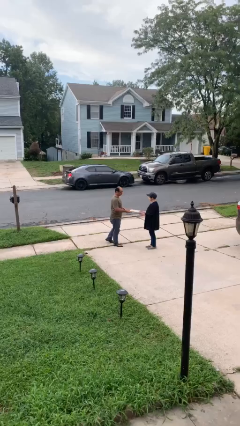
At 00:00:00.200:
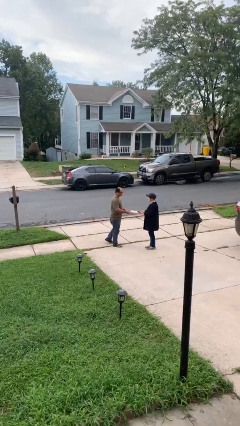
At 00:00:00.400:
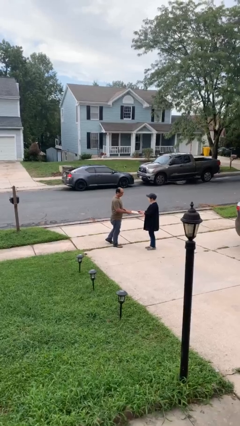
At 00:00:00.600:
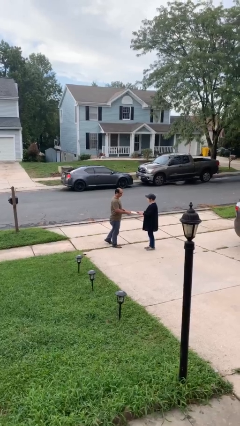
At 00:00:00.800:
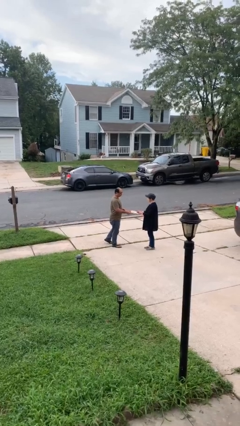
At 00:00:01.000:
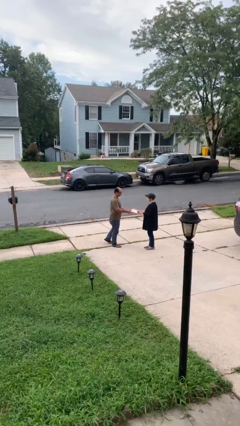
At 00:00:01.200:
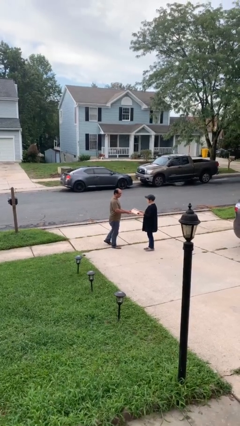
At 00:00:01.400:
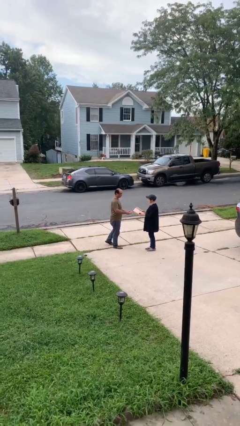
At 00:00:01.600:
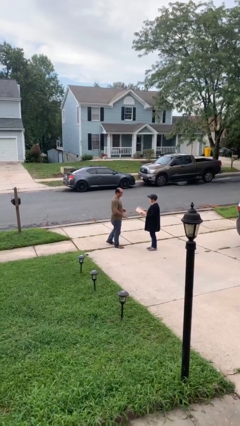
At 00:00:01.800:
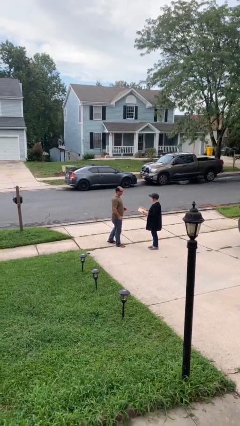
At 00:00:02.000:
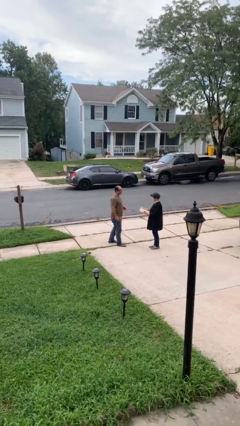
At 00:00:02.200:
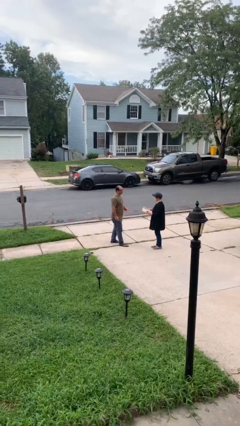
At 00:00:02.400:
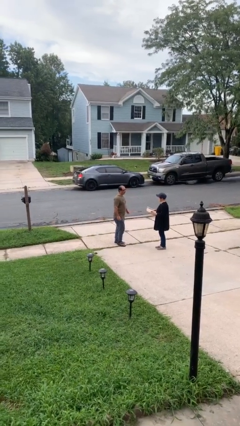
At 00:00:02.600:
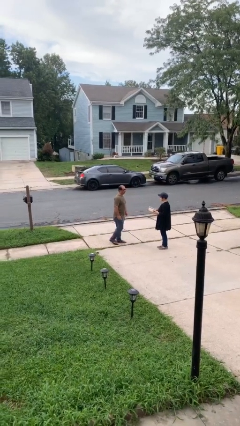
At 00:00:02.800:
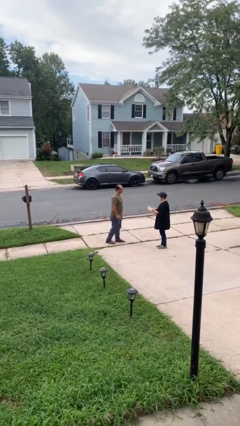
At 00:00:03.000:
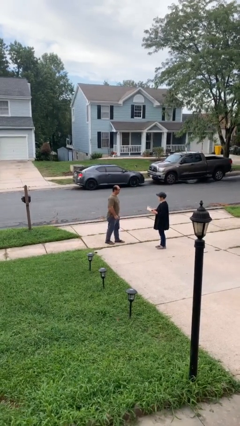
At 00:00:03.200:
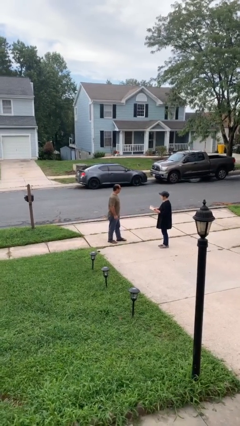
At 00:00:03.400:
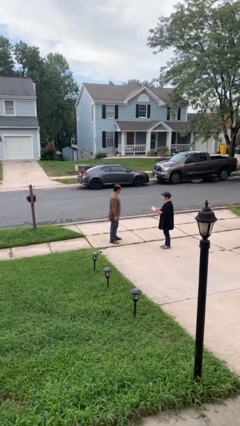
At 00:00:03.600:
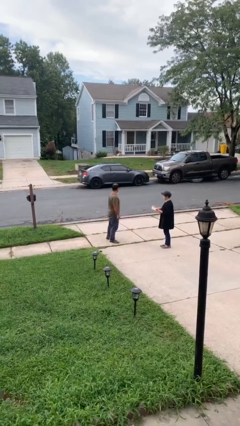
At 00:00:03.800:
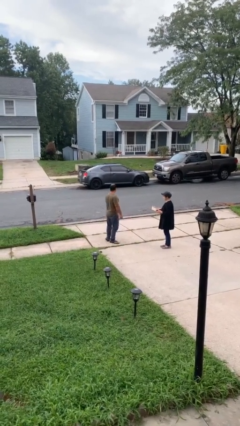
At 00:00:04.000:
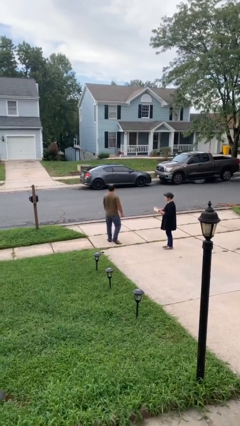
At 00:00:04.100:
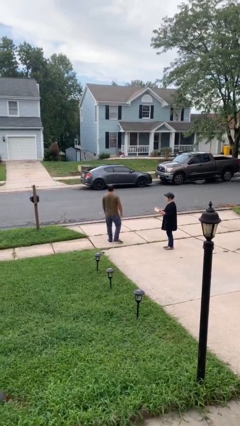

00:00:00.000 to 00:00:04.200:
person transfers object to person

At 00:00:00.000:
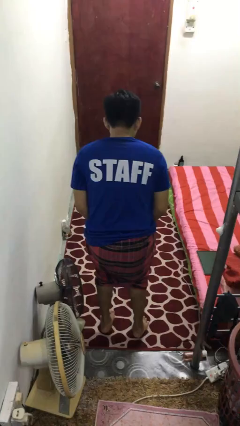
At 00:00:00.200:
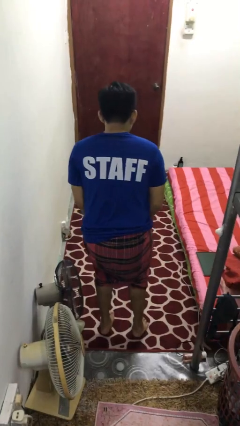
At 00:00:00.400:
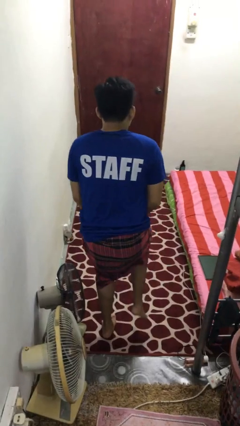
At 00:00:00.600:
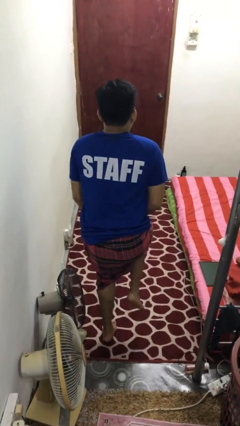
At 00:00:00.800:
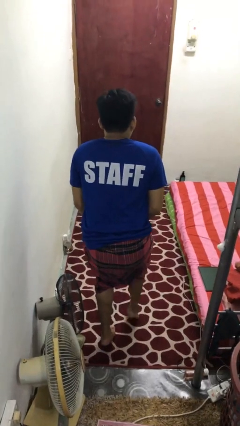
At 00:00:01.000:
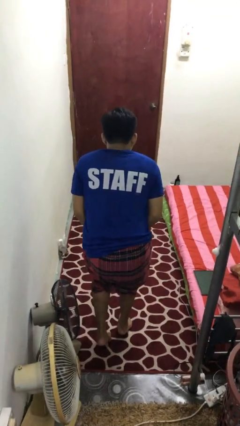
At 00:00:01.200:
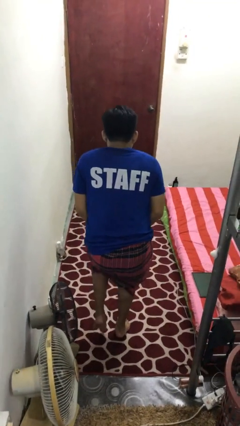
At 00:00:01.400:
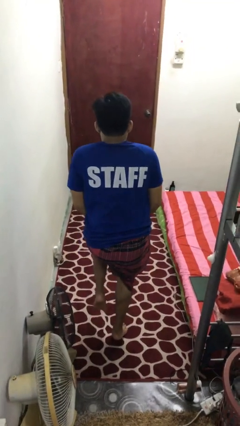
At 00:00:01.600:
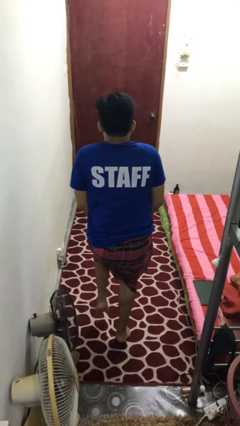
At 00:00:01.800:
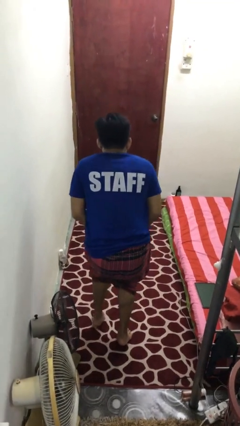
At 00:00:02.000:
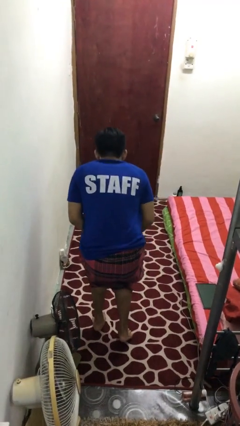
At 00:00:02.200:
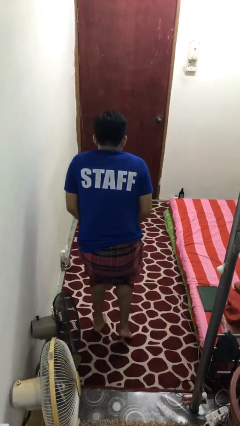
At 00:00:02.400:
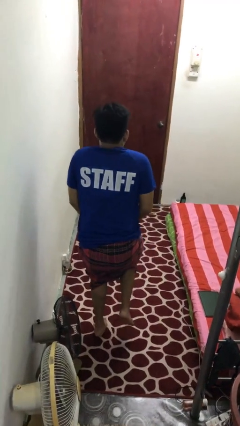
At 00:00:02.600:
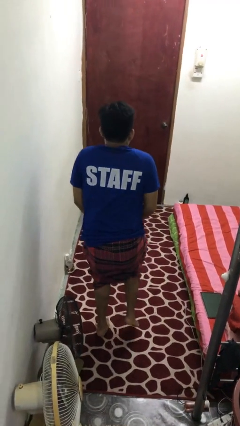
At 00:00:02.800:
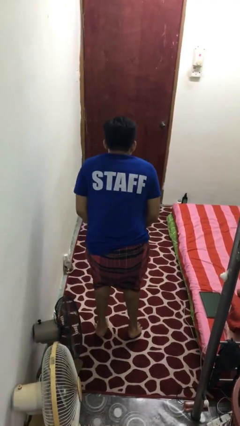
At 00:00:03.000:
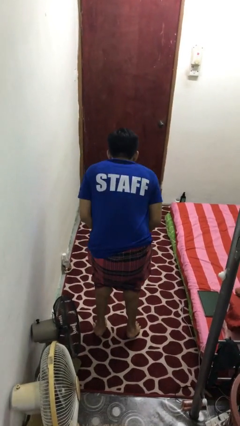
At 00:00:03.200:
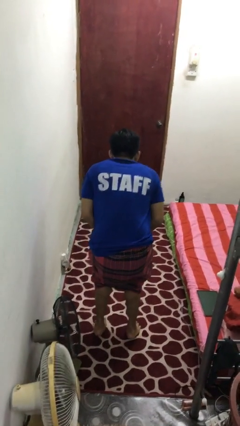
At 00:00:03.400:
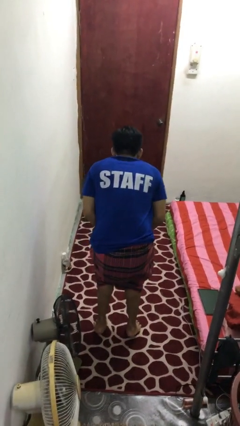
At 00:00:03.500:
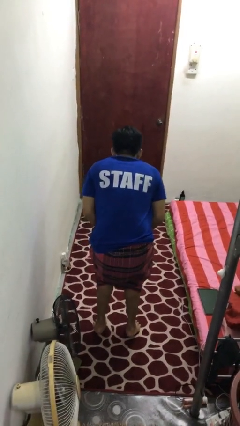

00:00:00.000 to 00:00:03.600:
person walks tiptoe

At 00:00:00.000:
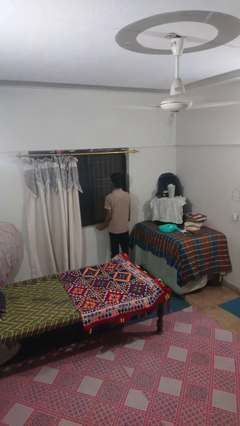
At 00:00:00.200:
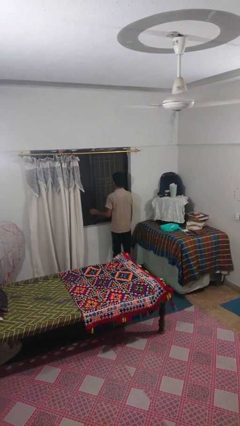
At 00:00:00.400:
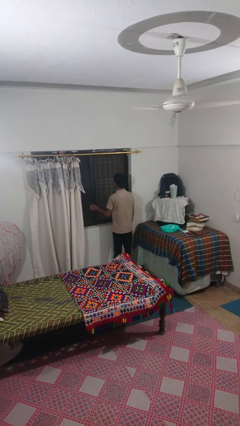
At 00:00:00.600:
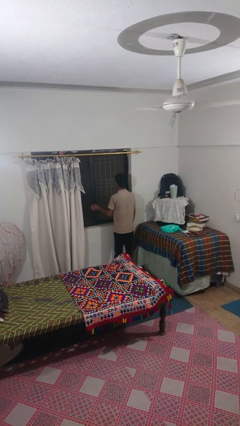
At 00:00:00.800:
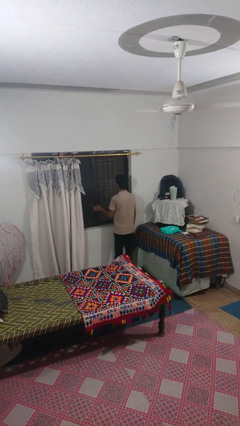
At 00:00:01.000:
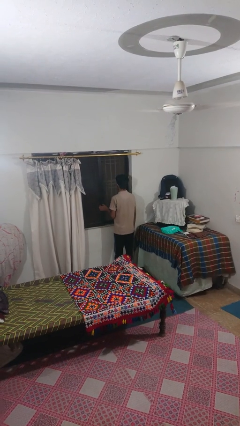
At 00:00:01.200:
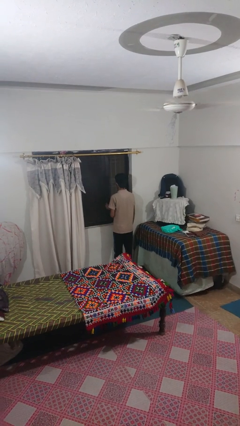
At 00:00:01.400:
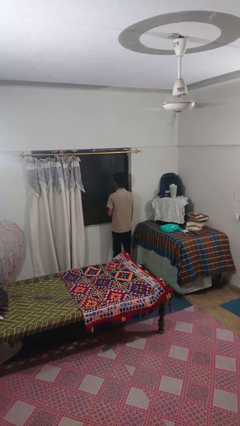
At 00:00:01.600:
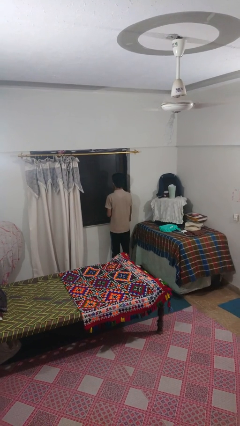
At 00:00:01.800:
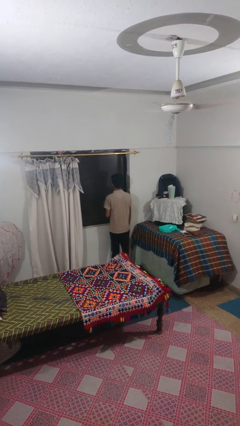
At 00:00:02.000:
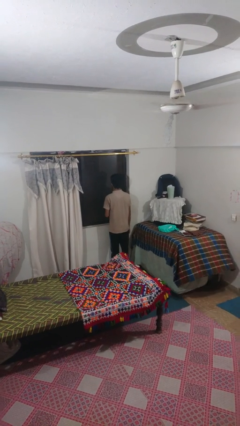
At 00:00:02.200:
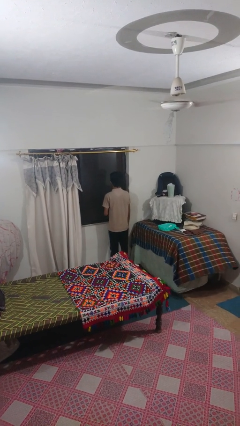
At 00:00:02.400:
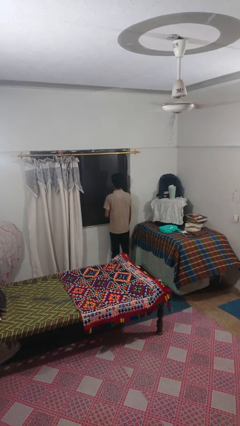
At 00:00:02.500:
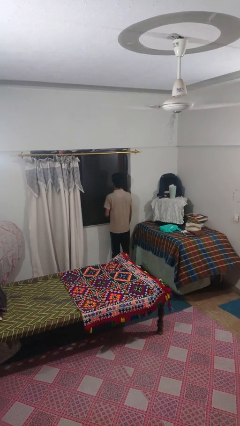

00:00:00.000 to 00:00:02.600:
person closes sliding door

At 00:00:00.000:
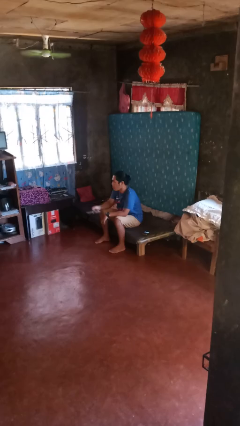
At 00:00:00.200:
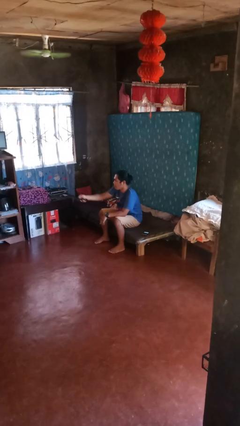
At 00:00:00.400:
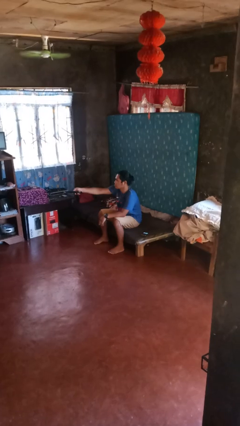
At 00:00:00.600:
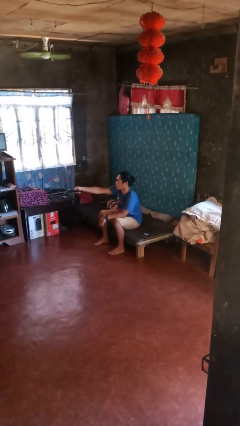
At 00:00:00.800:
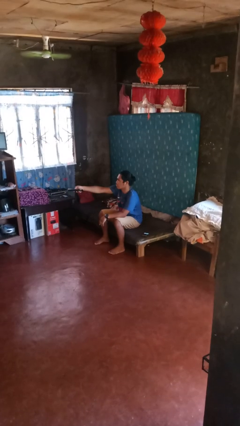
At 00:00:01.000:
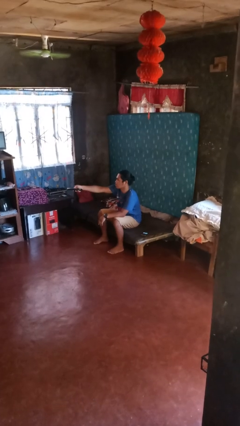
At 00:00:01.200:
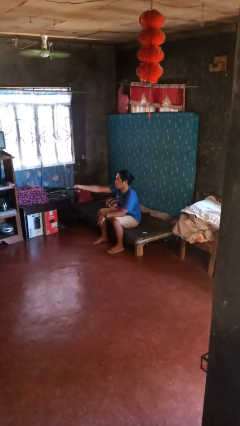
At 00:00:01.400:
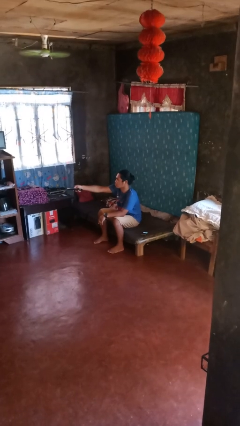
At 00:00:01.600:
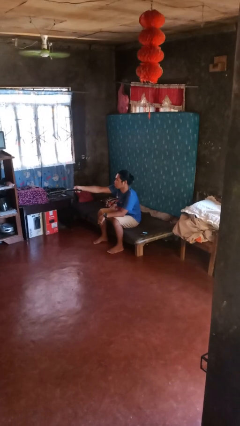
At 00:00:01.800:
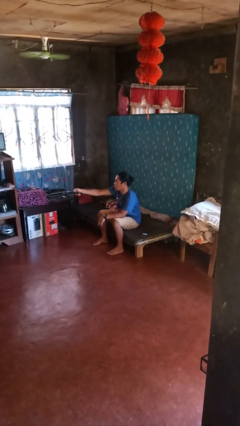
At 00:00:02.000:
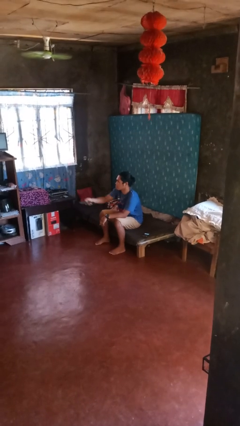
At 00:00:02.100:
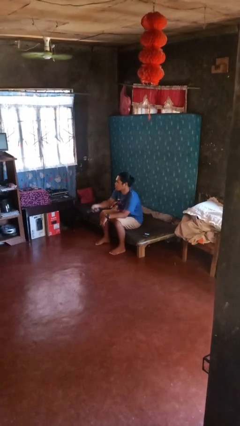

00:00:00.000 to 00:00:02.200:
person uses television remote

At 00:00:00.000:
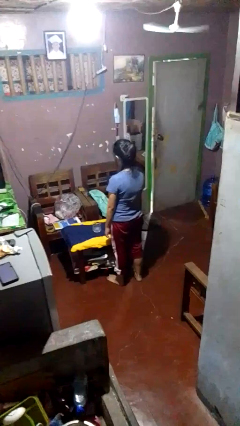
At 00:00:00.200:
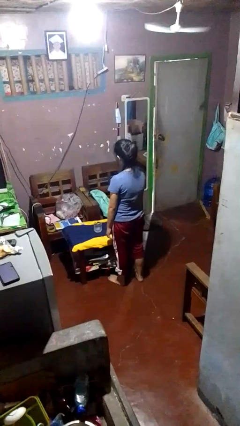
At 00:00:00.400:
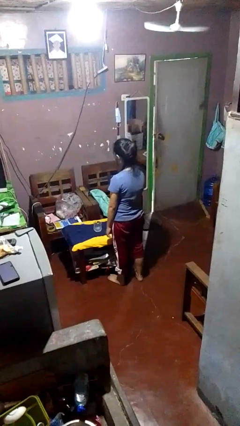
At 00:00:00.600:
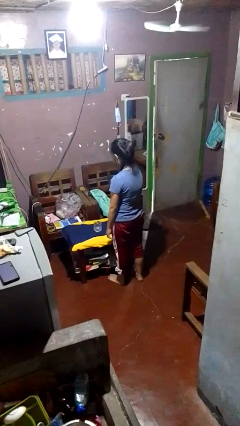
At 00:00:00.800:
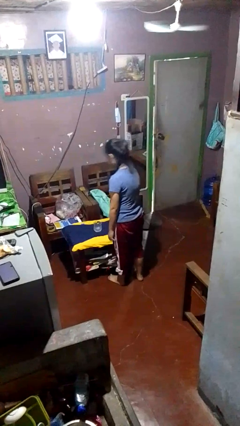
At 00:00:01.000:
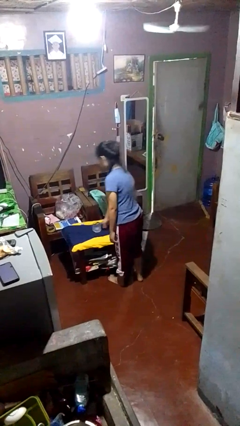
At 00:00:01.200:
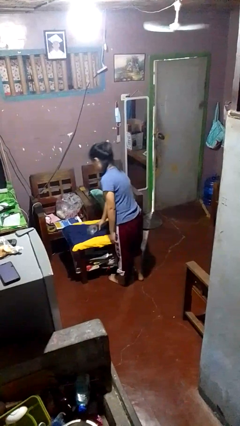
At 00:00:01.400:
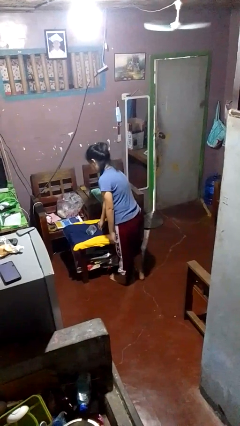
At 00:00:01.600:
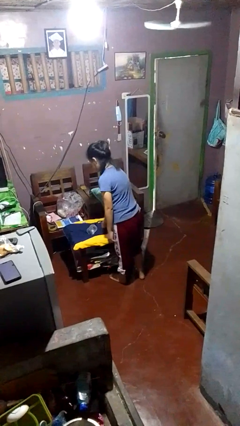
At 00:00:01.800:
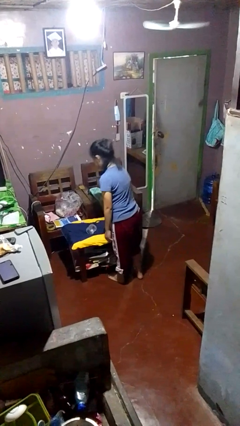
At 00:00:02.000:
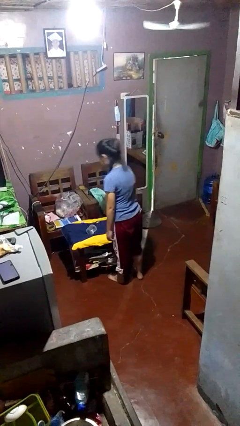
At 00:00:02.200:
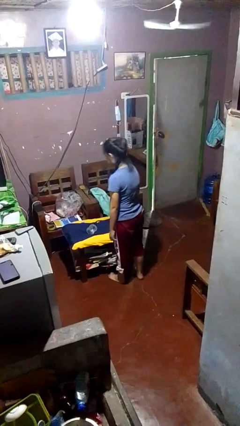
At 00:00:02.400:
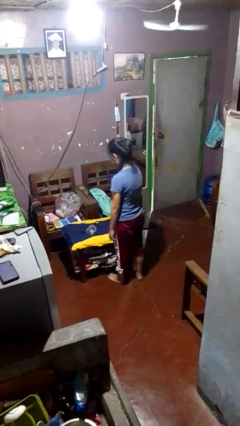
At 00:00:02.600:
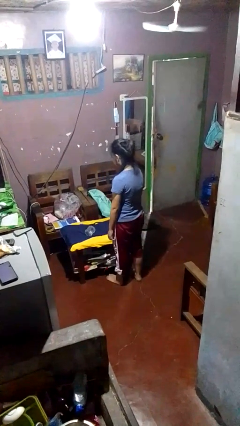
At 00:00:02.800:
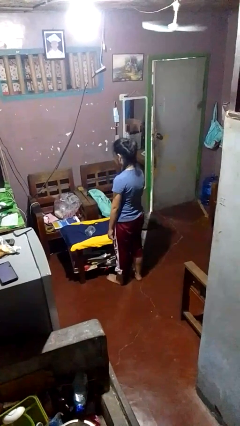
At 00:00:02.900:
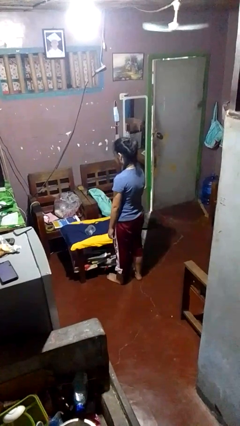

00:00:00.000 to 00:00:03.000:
person knocks over glass

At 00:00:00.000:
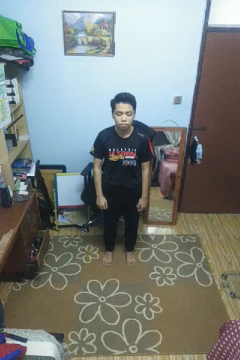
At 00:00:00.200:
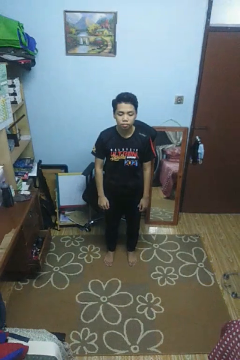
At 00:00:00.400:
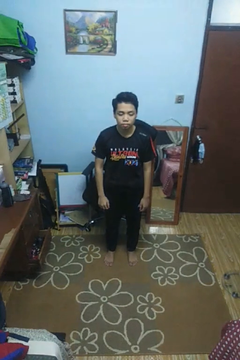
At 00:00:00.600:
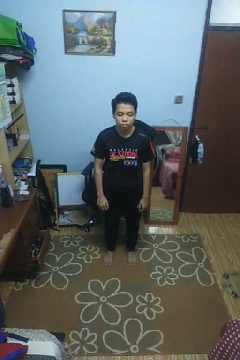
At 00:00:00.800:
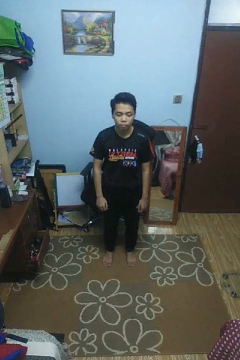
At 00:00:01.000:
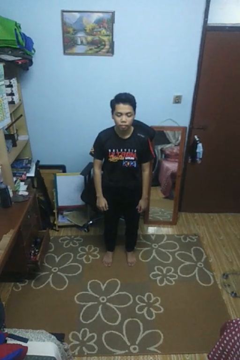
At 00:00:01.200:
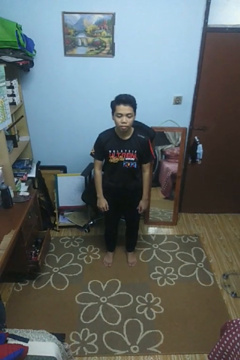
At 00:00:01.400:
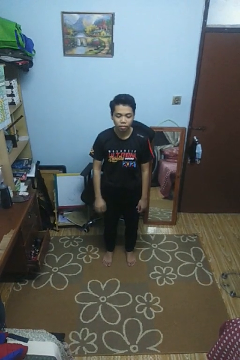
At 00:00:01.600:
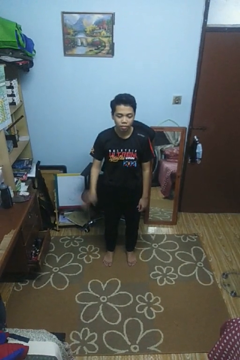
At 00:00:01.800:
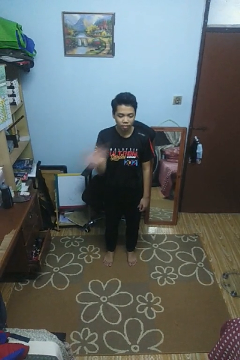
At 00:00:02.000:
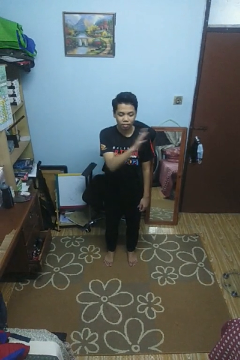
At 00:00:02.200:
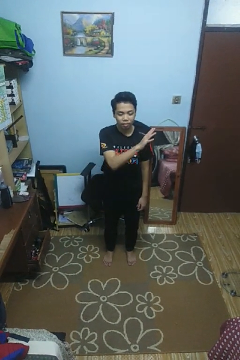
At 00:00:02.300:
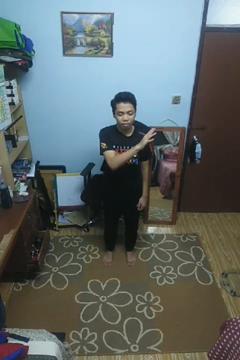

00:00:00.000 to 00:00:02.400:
person gestures swipe left
